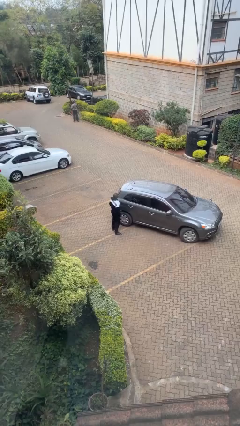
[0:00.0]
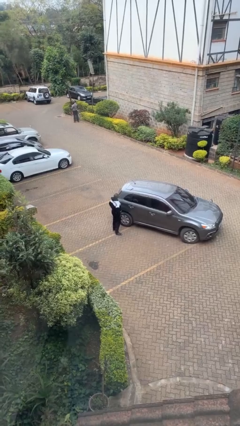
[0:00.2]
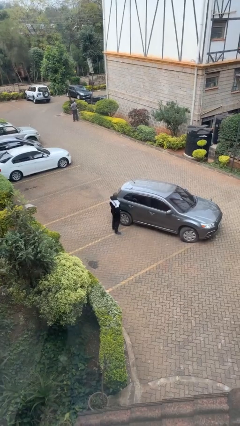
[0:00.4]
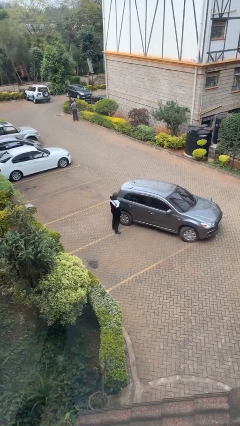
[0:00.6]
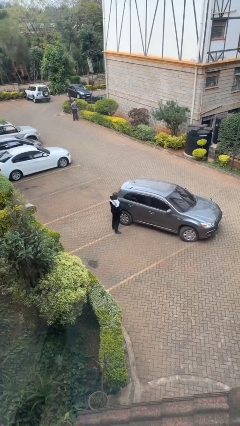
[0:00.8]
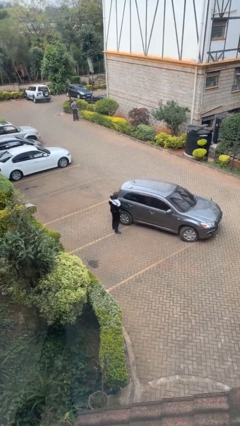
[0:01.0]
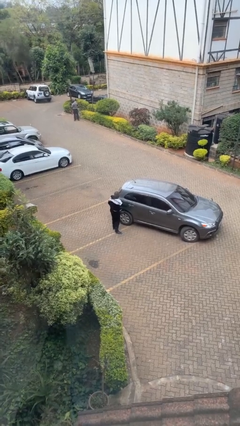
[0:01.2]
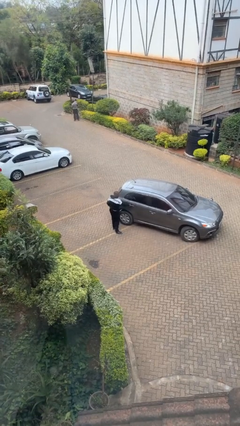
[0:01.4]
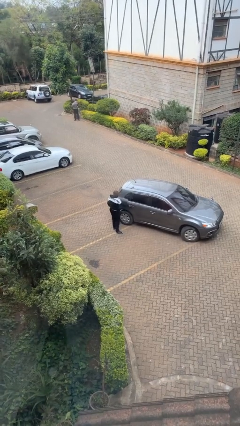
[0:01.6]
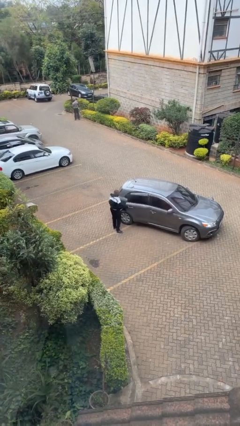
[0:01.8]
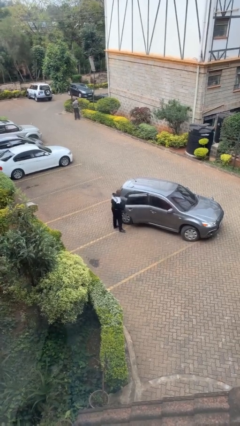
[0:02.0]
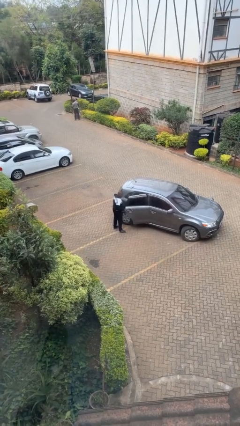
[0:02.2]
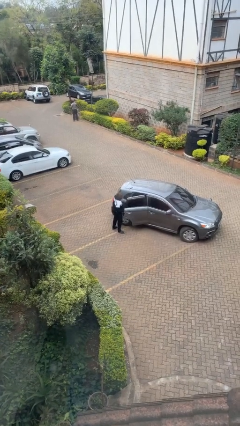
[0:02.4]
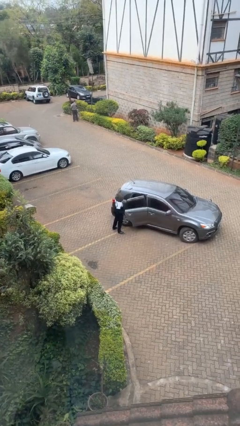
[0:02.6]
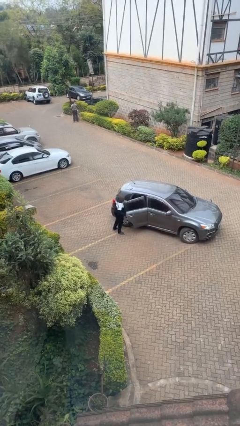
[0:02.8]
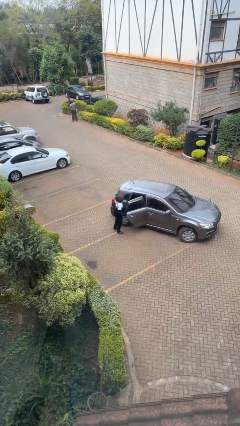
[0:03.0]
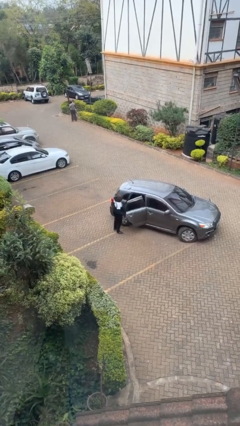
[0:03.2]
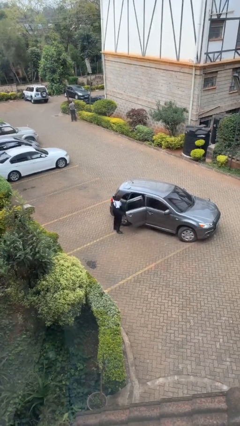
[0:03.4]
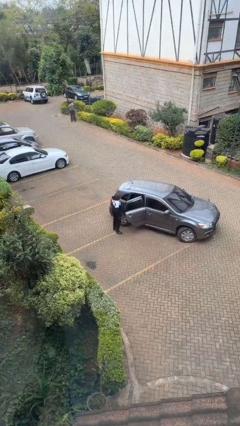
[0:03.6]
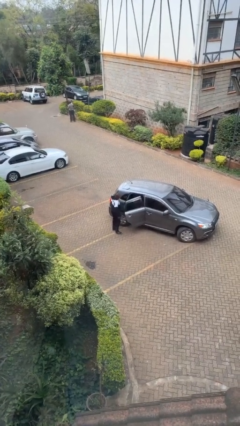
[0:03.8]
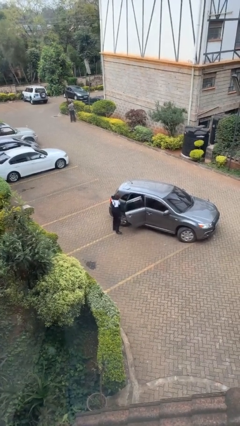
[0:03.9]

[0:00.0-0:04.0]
person opens car door

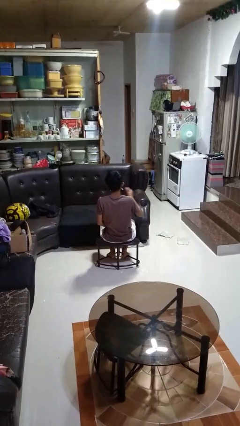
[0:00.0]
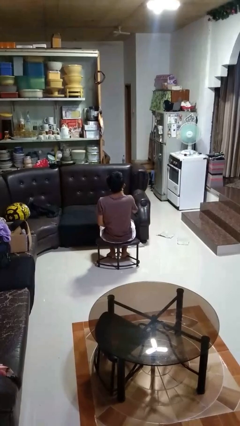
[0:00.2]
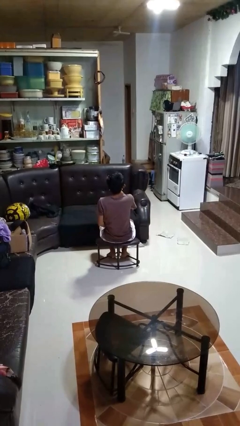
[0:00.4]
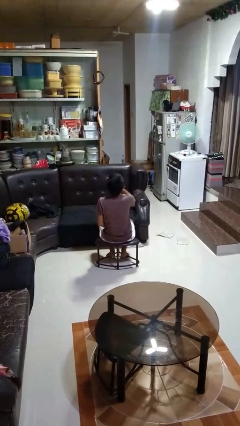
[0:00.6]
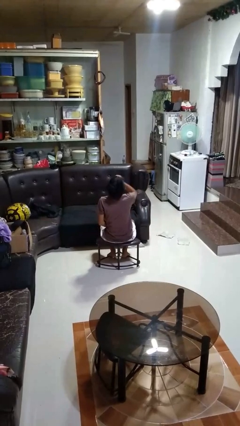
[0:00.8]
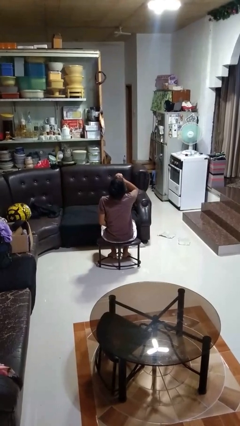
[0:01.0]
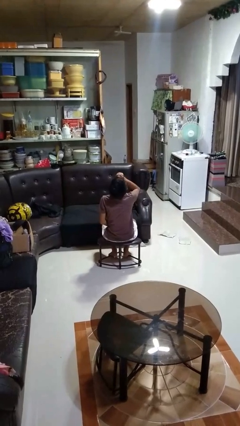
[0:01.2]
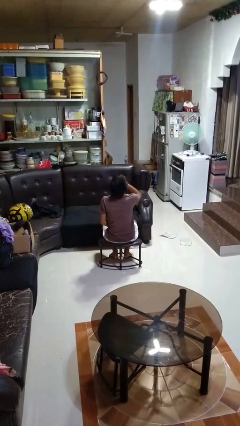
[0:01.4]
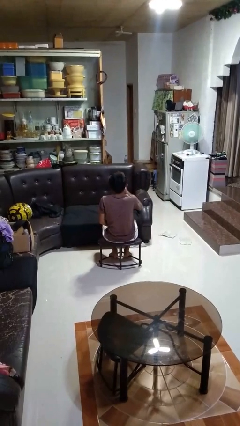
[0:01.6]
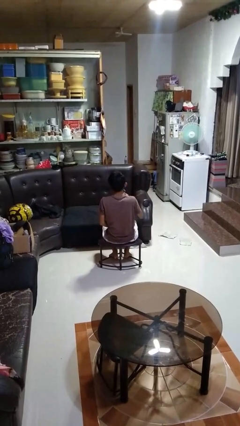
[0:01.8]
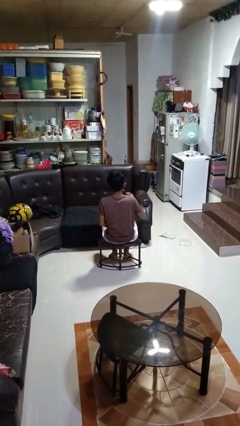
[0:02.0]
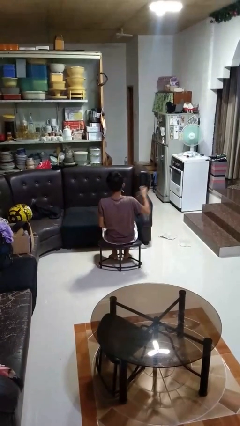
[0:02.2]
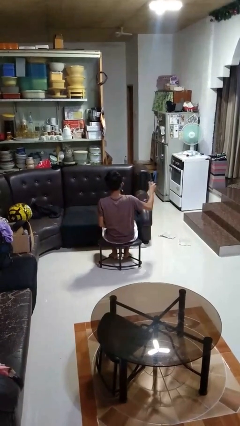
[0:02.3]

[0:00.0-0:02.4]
person drinks from beverage can

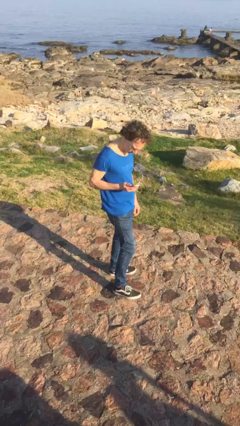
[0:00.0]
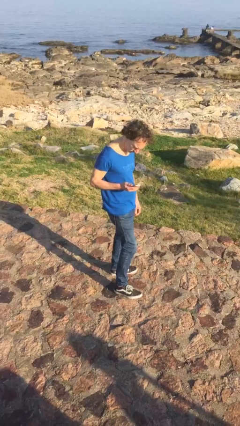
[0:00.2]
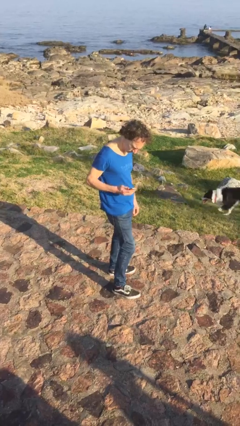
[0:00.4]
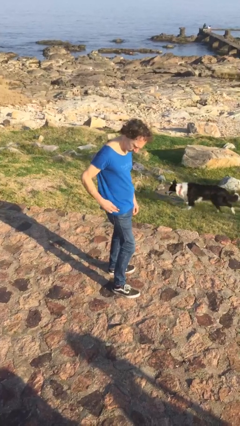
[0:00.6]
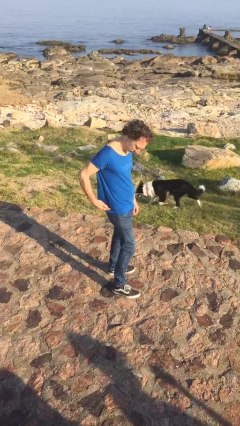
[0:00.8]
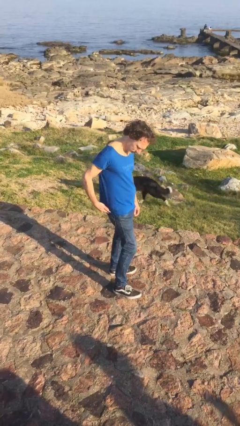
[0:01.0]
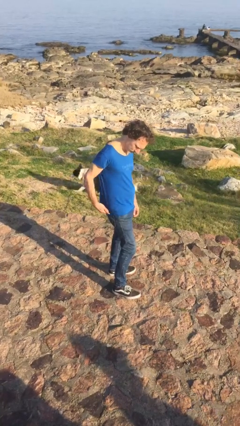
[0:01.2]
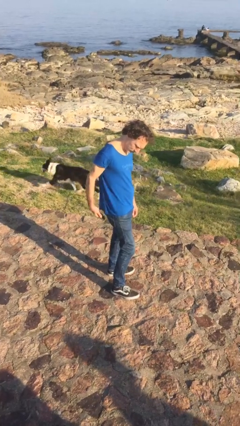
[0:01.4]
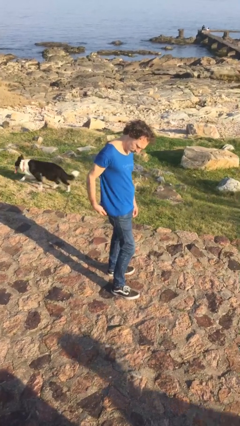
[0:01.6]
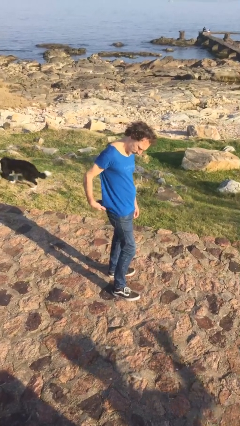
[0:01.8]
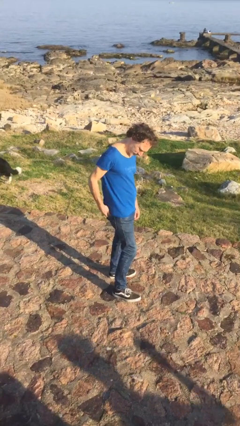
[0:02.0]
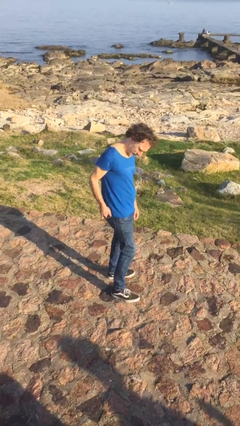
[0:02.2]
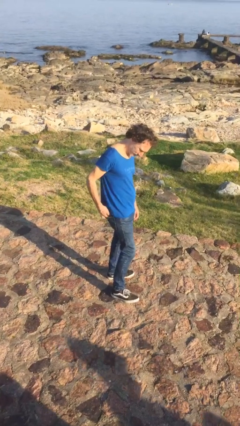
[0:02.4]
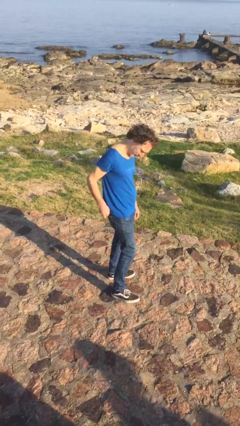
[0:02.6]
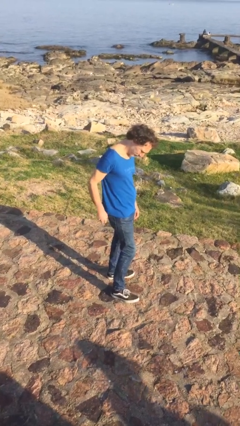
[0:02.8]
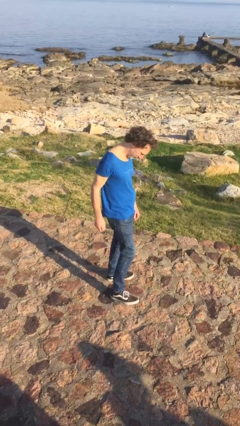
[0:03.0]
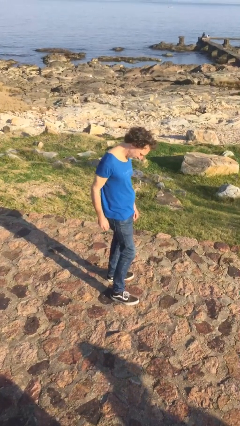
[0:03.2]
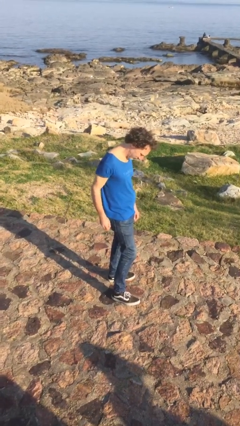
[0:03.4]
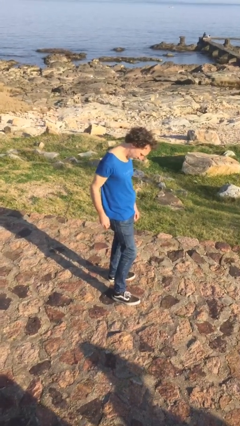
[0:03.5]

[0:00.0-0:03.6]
person puts phone into pocket

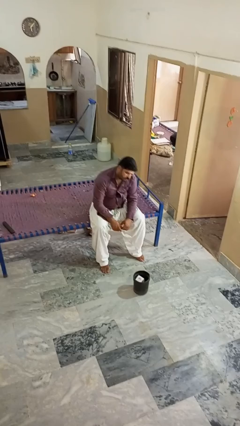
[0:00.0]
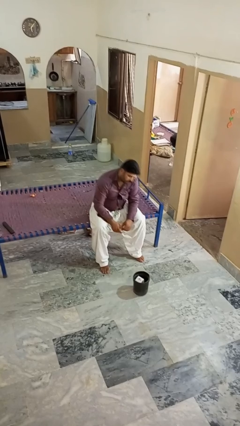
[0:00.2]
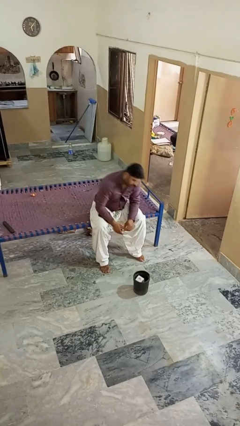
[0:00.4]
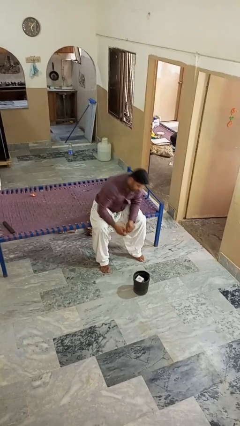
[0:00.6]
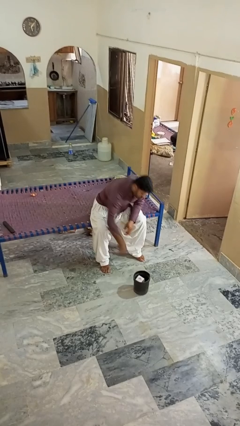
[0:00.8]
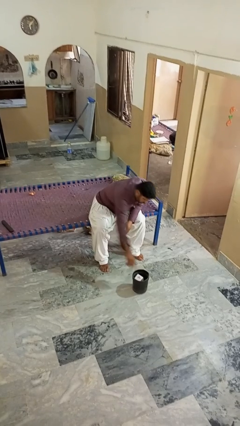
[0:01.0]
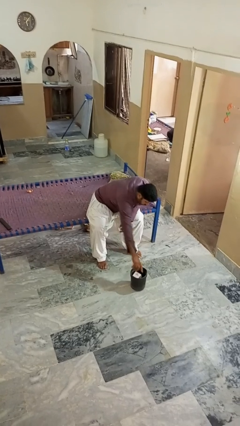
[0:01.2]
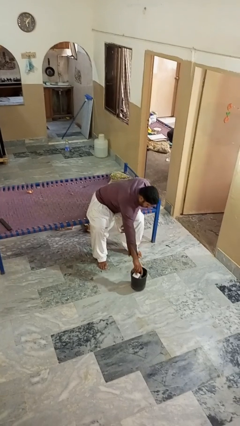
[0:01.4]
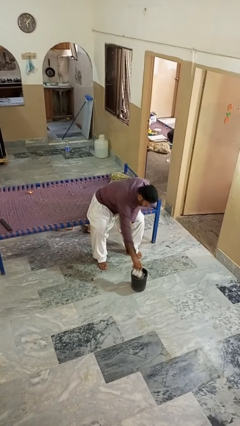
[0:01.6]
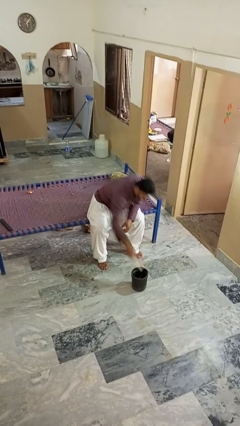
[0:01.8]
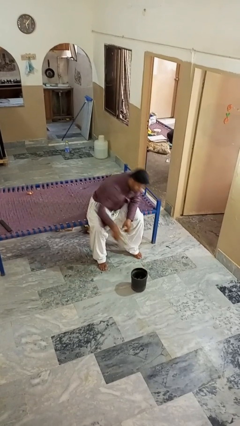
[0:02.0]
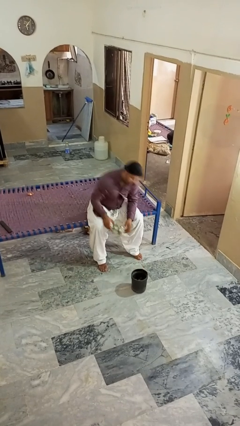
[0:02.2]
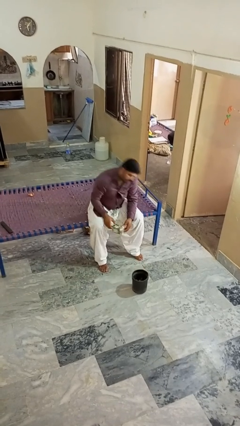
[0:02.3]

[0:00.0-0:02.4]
person takes object from basket

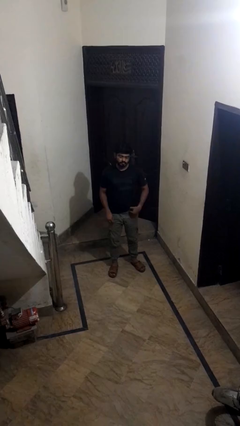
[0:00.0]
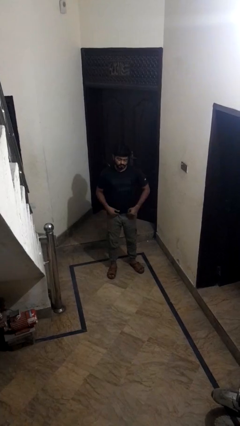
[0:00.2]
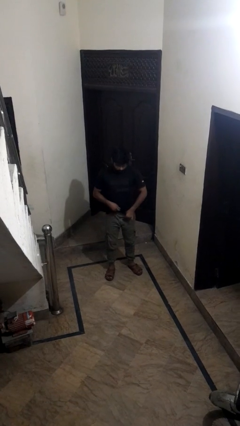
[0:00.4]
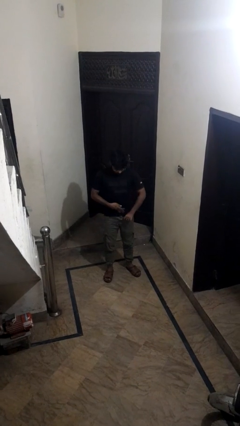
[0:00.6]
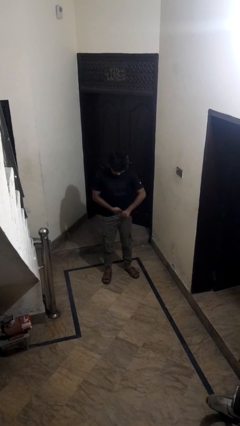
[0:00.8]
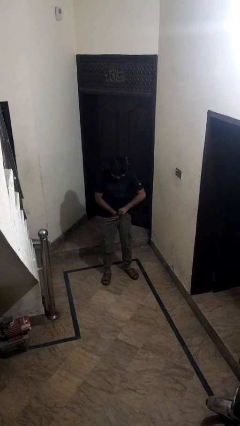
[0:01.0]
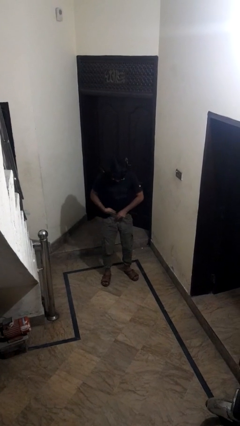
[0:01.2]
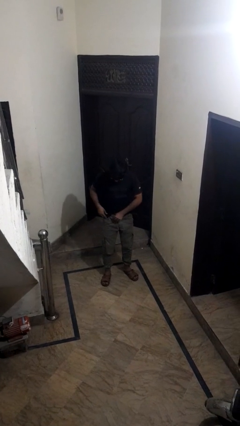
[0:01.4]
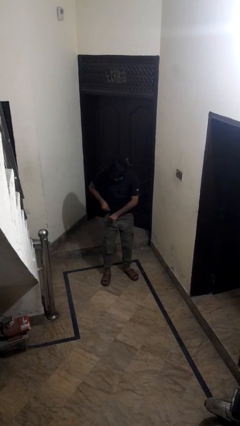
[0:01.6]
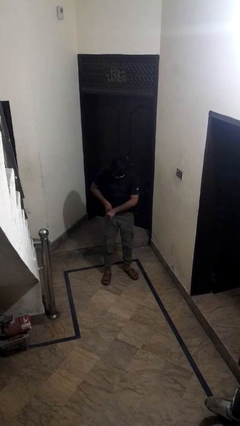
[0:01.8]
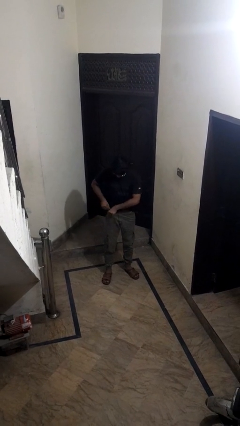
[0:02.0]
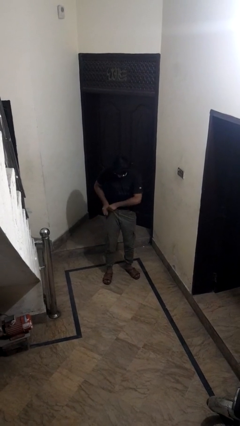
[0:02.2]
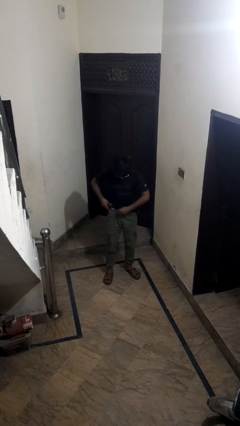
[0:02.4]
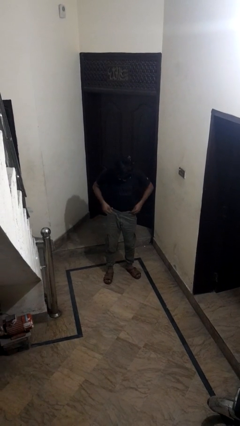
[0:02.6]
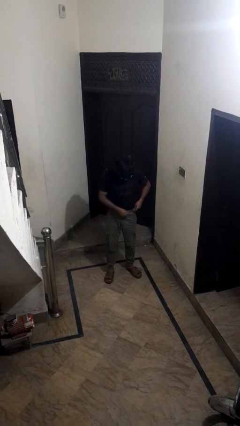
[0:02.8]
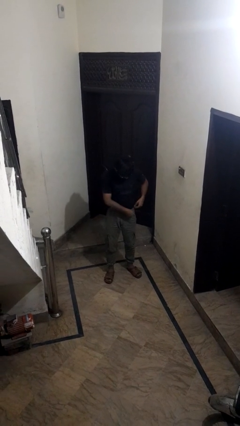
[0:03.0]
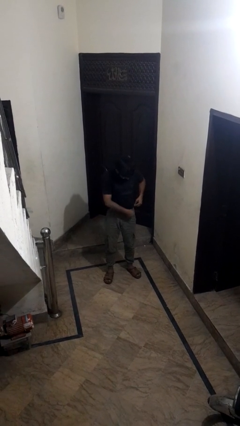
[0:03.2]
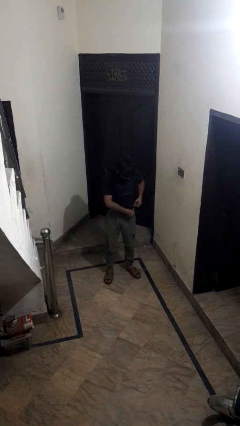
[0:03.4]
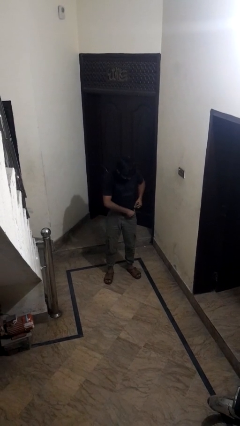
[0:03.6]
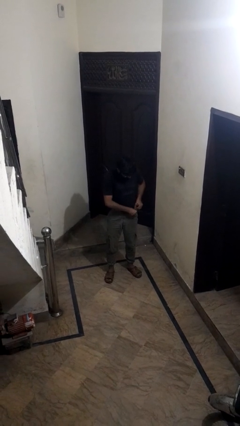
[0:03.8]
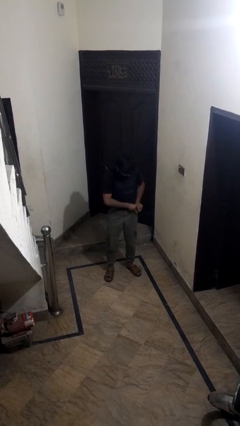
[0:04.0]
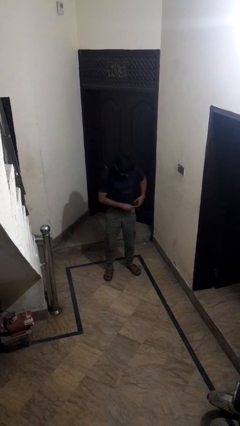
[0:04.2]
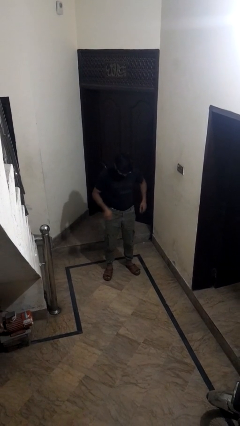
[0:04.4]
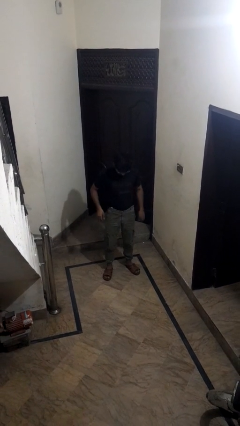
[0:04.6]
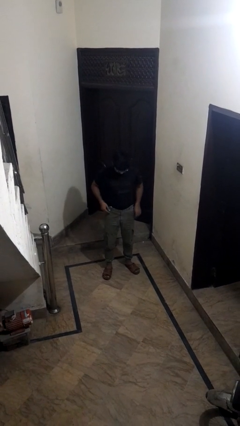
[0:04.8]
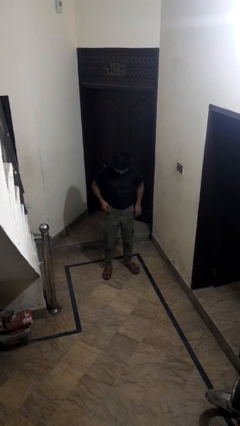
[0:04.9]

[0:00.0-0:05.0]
person tucks in shirt

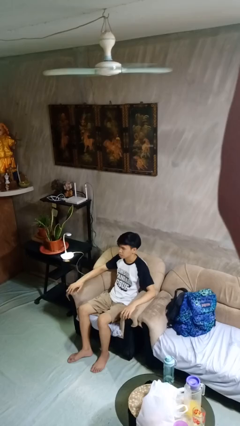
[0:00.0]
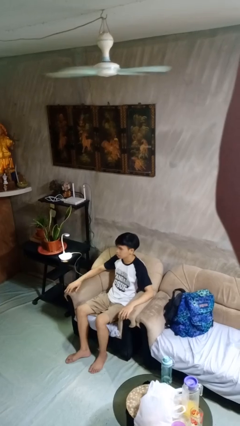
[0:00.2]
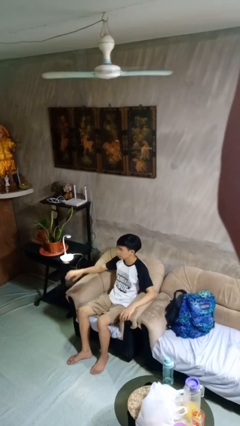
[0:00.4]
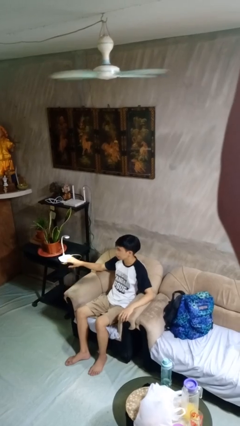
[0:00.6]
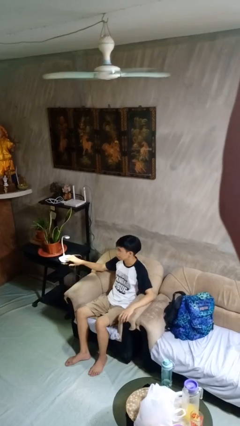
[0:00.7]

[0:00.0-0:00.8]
person turns off lamp
